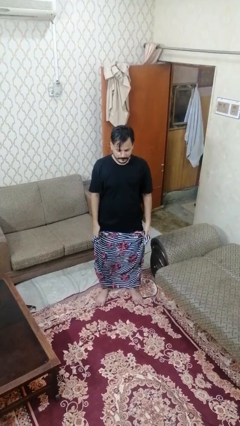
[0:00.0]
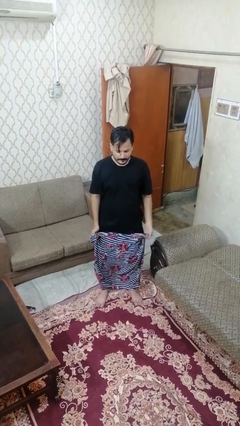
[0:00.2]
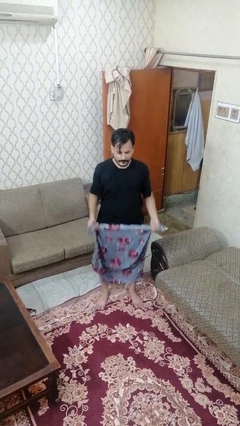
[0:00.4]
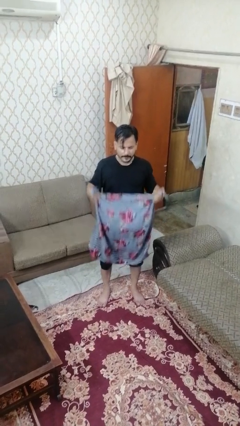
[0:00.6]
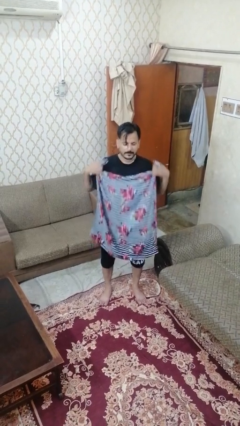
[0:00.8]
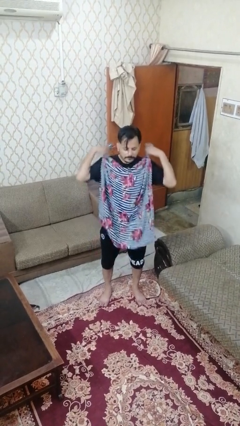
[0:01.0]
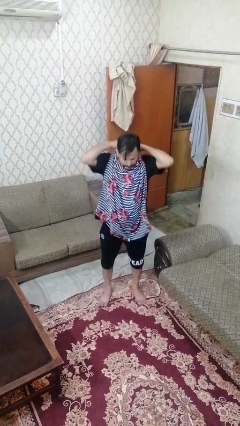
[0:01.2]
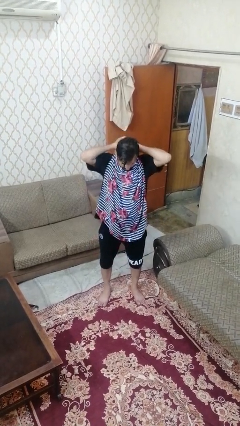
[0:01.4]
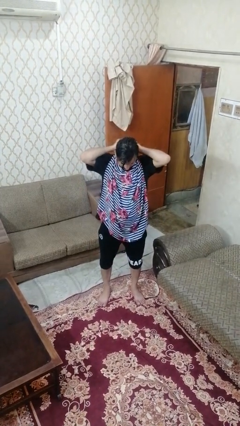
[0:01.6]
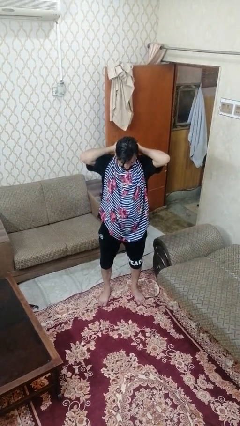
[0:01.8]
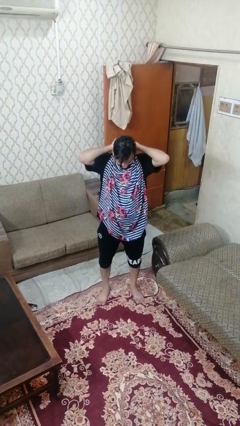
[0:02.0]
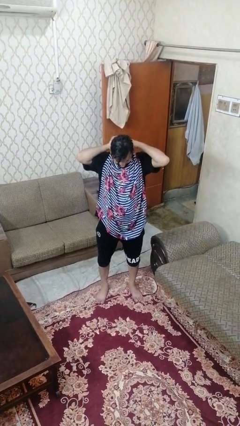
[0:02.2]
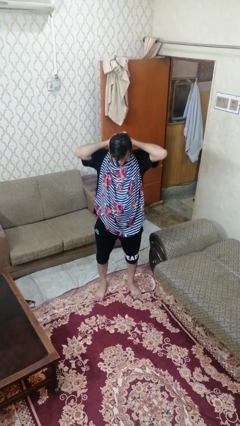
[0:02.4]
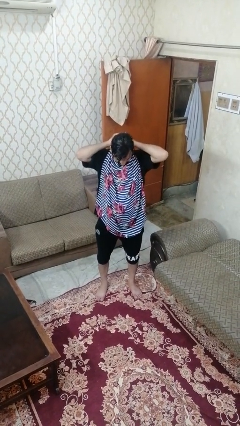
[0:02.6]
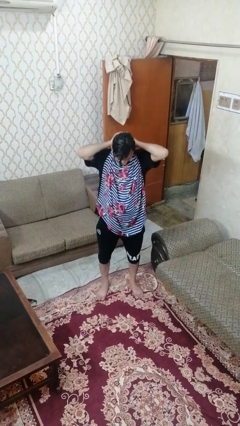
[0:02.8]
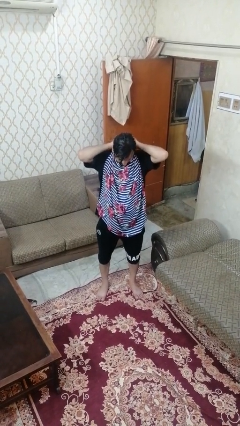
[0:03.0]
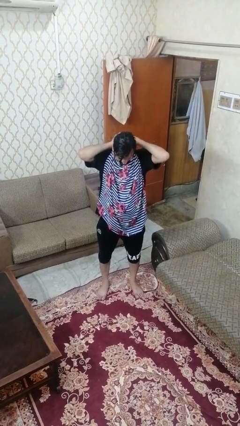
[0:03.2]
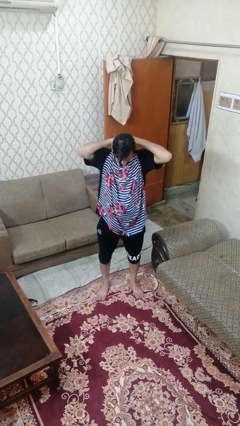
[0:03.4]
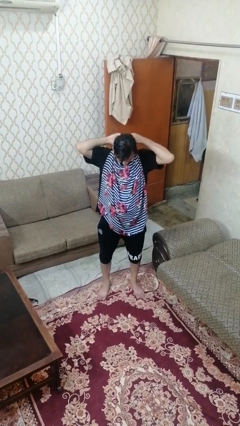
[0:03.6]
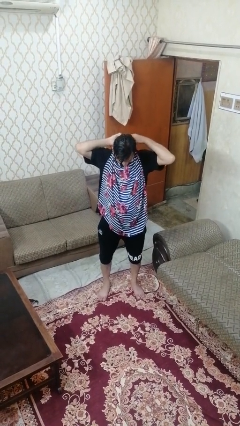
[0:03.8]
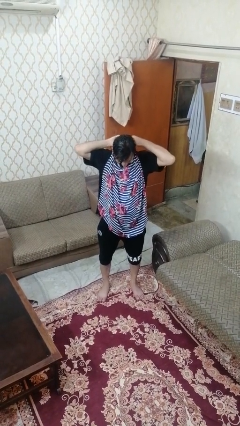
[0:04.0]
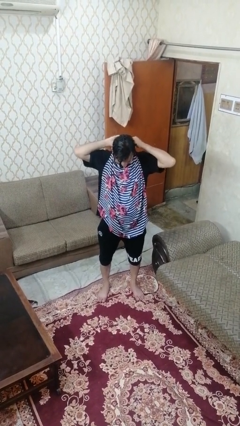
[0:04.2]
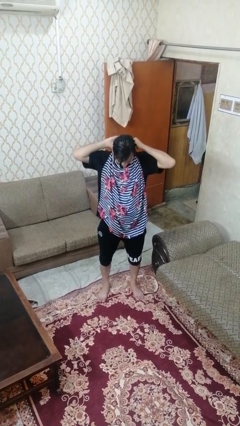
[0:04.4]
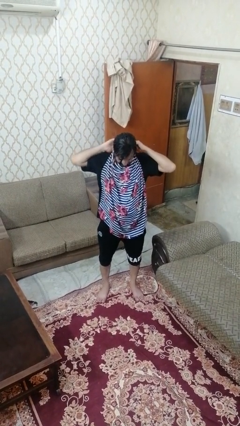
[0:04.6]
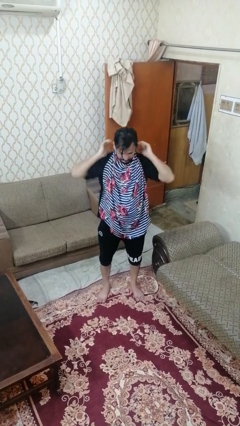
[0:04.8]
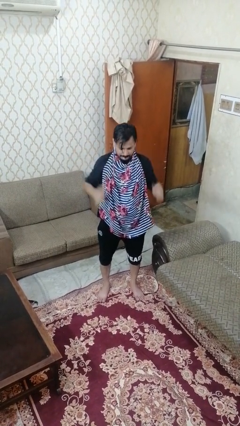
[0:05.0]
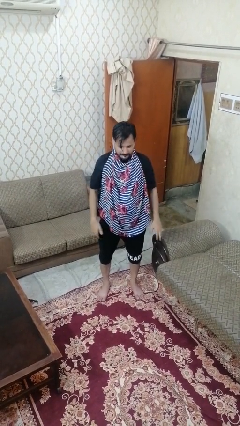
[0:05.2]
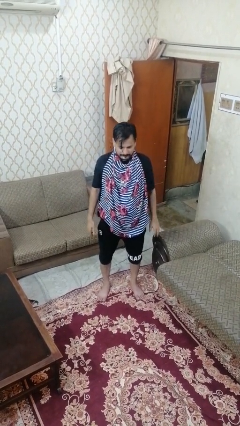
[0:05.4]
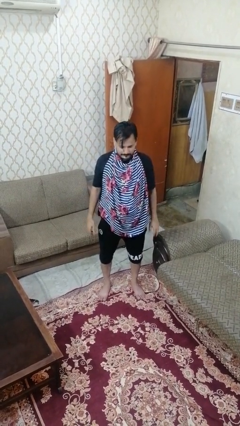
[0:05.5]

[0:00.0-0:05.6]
person puts on apron

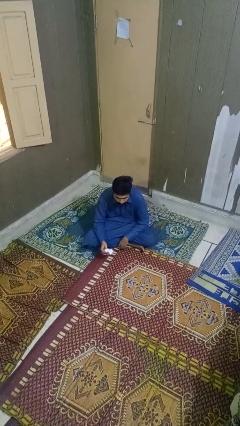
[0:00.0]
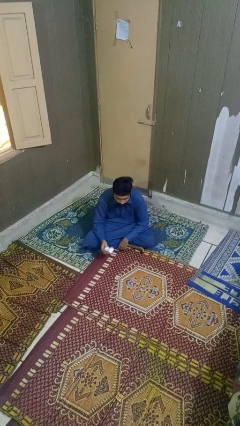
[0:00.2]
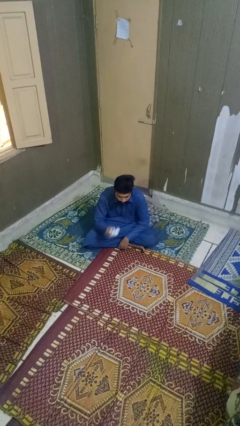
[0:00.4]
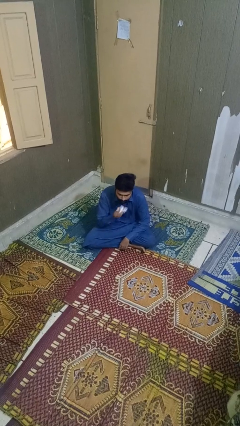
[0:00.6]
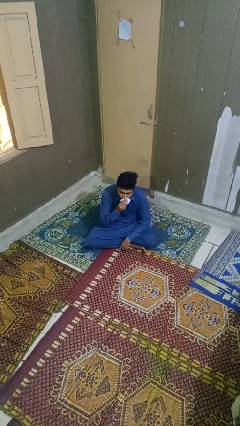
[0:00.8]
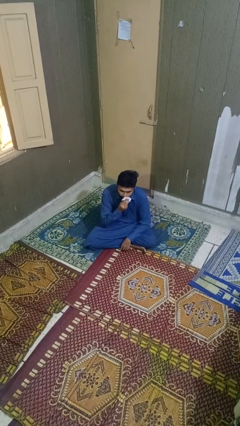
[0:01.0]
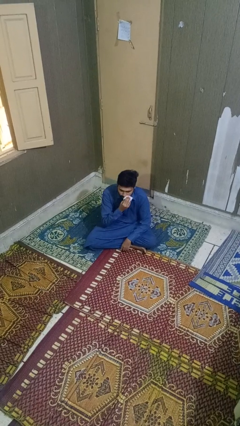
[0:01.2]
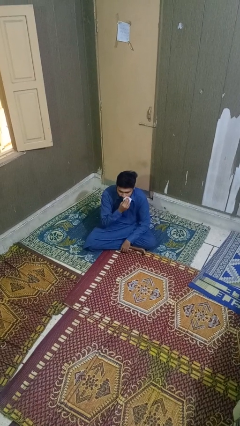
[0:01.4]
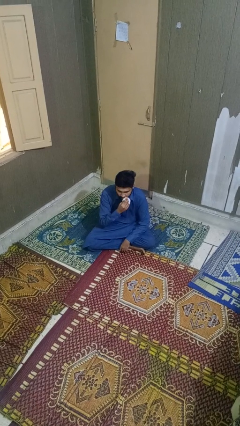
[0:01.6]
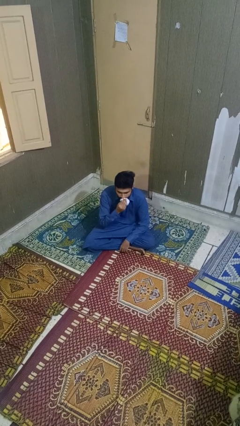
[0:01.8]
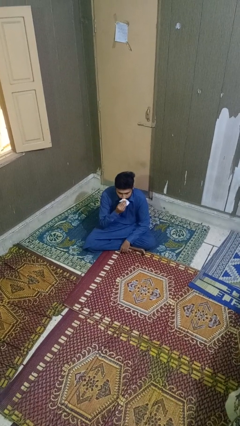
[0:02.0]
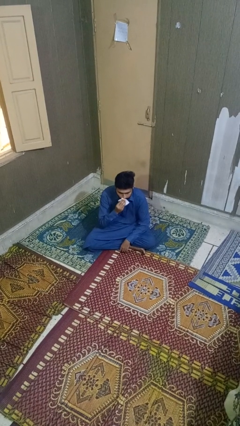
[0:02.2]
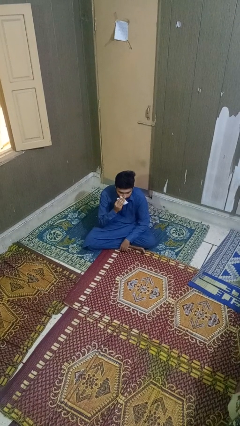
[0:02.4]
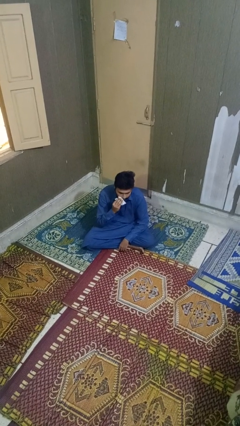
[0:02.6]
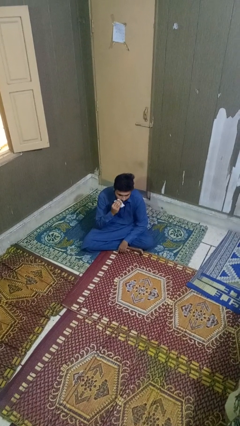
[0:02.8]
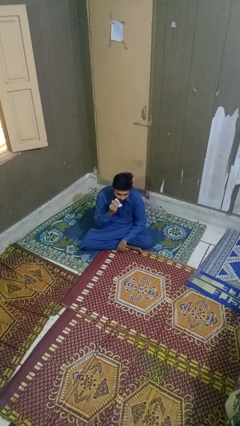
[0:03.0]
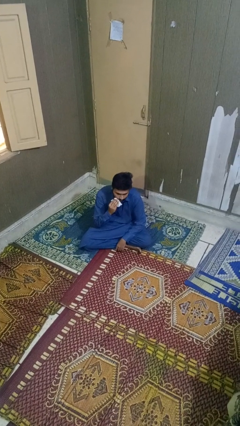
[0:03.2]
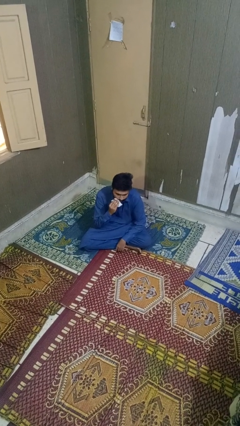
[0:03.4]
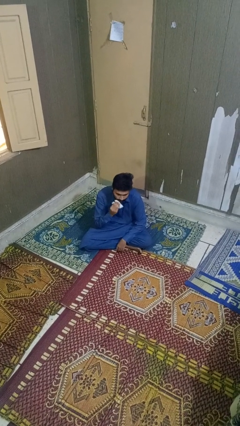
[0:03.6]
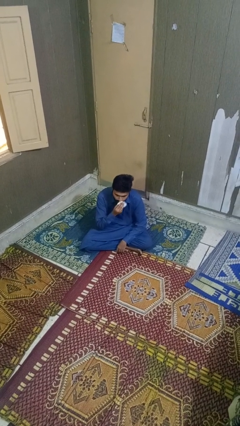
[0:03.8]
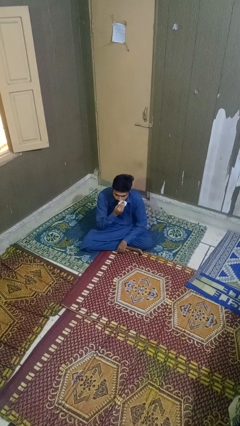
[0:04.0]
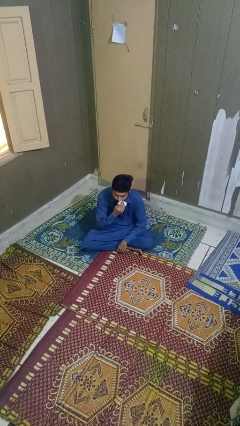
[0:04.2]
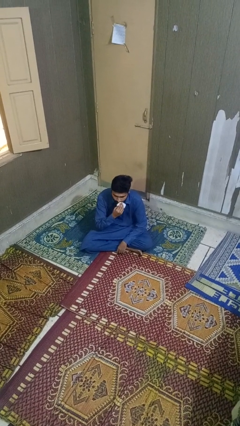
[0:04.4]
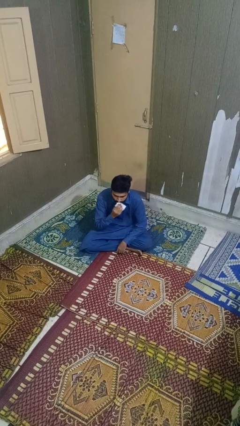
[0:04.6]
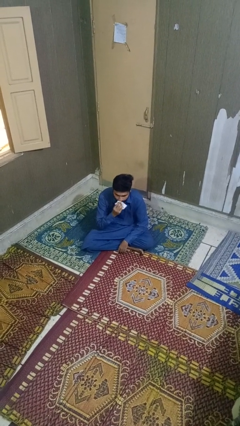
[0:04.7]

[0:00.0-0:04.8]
person wipes mouth with napkin

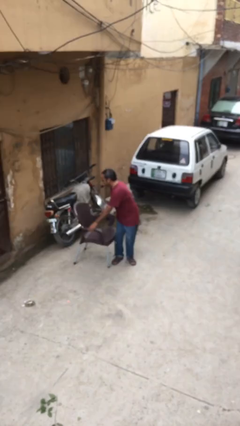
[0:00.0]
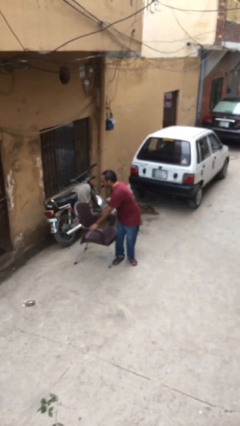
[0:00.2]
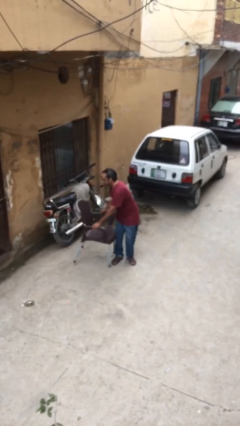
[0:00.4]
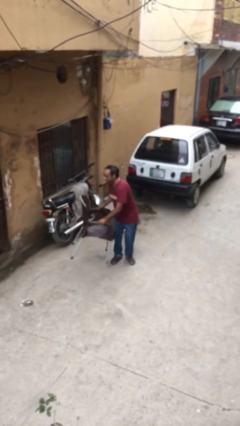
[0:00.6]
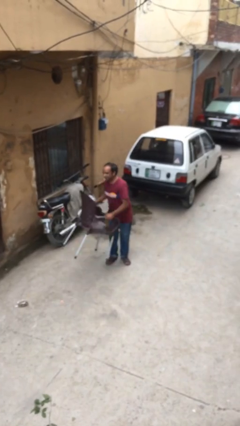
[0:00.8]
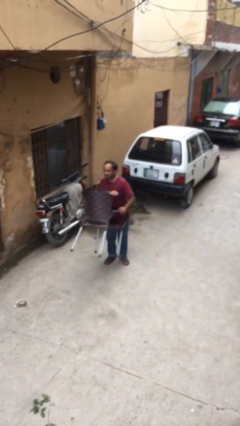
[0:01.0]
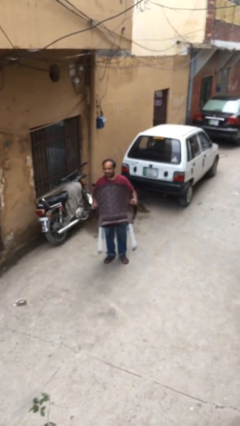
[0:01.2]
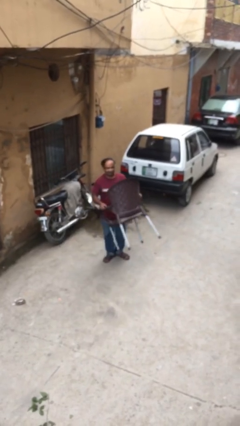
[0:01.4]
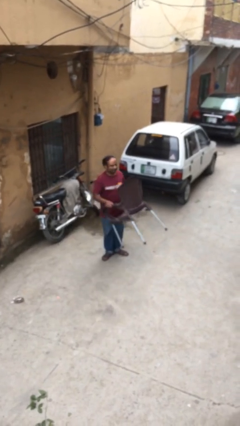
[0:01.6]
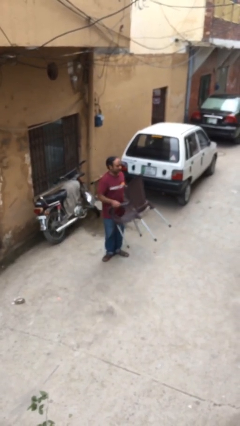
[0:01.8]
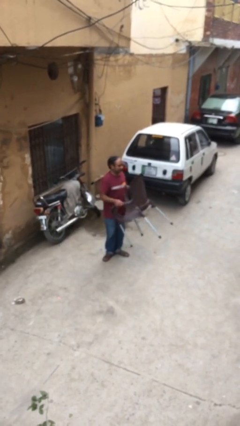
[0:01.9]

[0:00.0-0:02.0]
person picks up object from floor

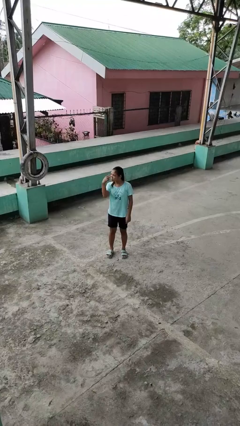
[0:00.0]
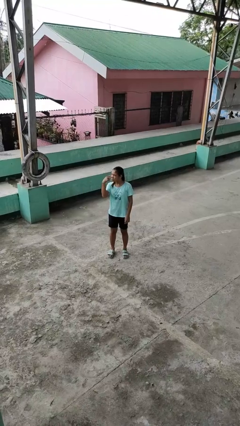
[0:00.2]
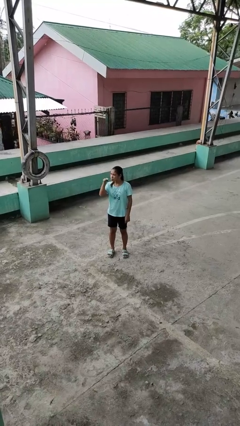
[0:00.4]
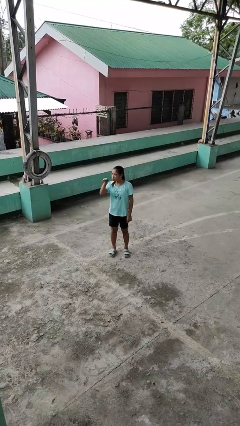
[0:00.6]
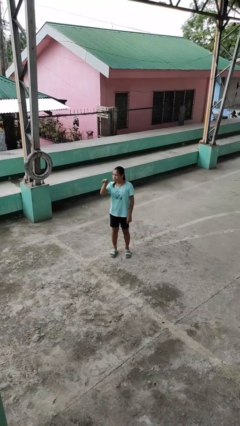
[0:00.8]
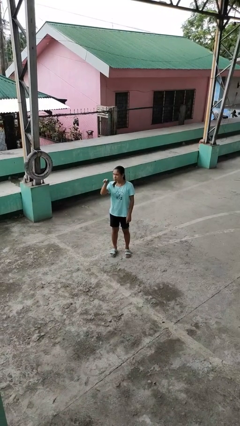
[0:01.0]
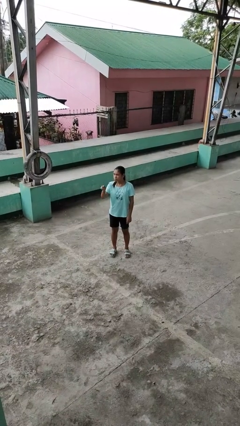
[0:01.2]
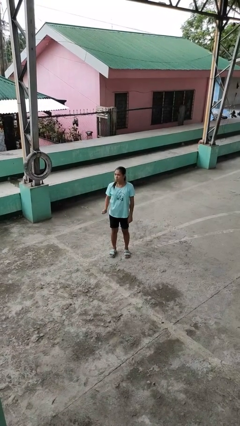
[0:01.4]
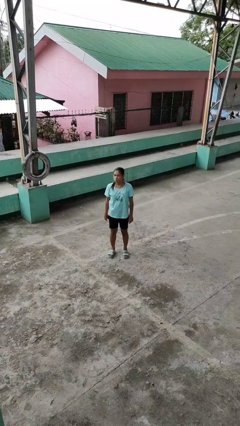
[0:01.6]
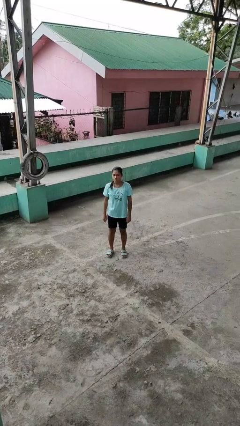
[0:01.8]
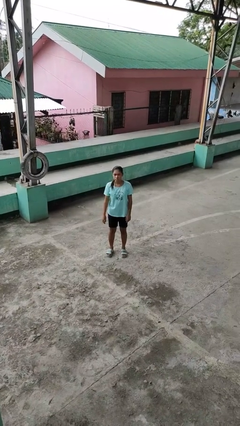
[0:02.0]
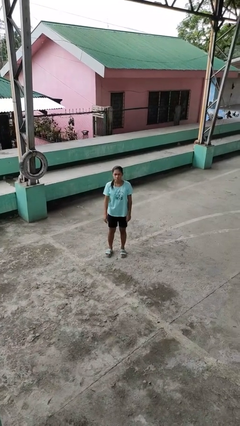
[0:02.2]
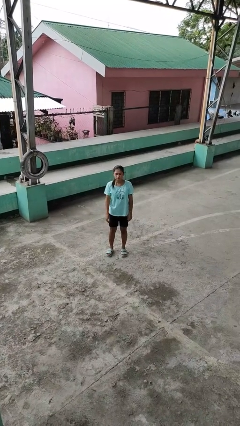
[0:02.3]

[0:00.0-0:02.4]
person gestures watch closely

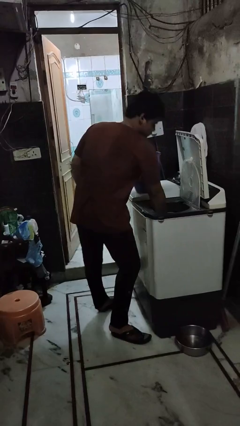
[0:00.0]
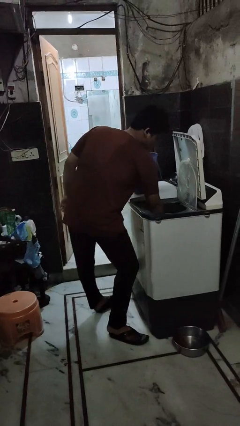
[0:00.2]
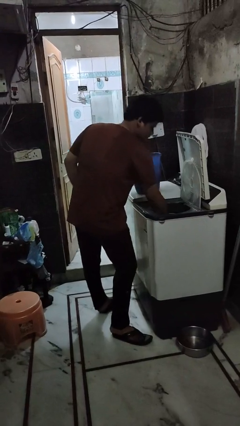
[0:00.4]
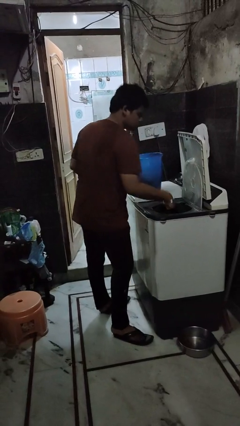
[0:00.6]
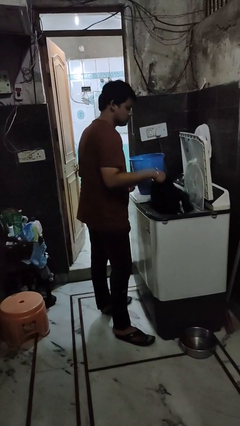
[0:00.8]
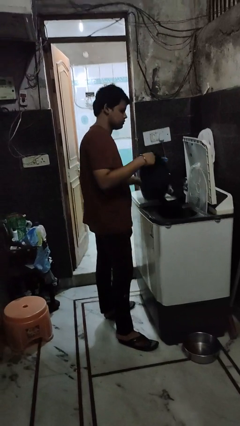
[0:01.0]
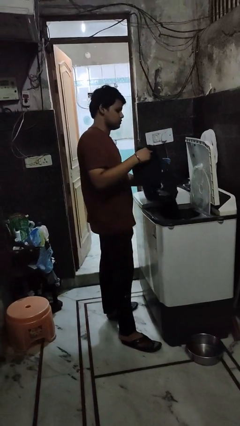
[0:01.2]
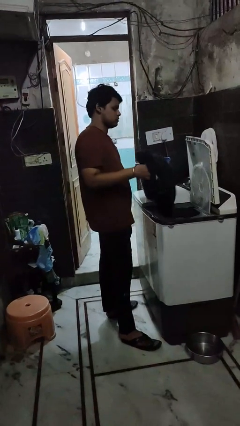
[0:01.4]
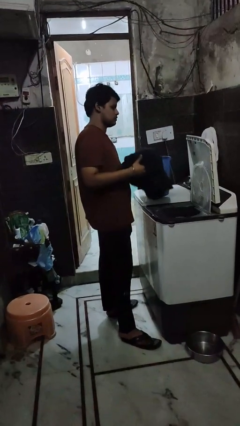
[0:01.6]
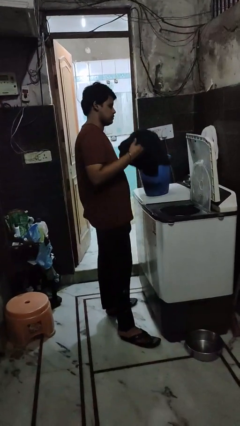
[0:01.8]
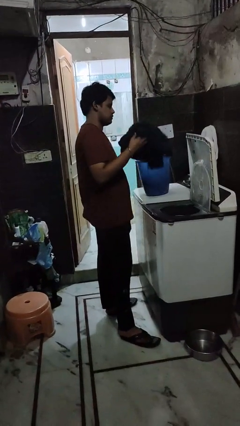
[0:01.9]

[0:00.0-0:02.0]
person unloads dryer

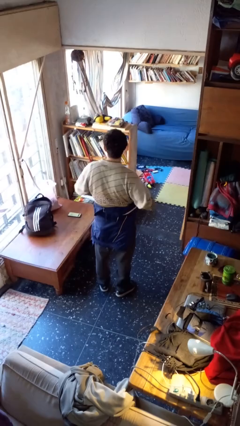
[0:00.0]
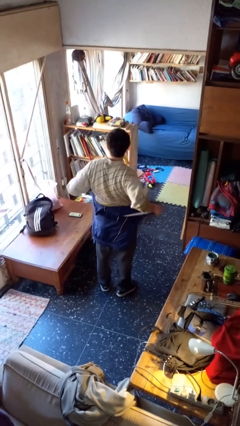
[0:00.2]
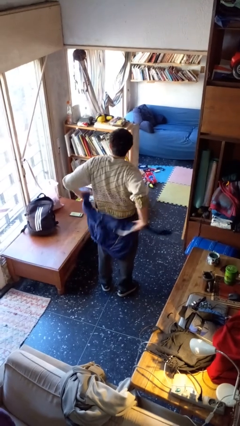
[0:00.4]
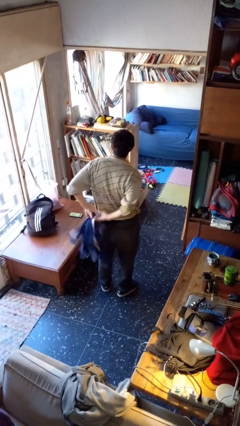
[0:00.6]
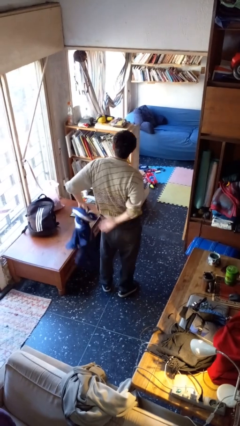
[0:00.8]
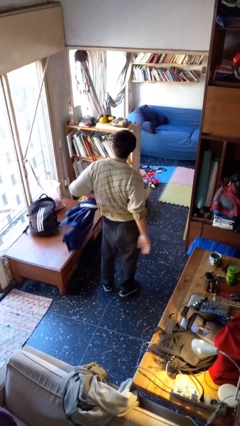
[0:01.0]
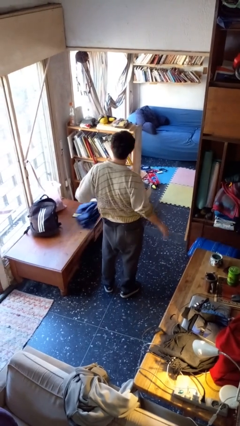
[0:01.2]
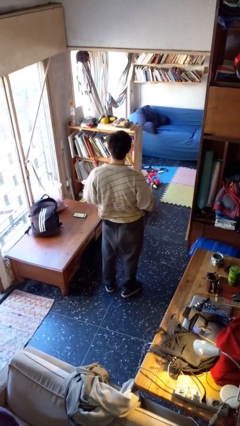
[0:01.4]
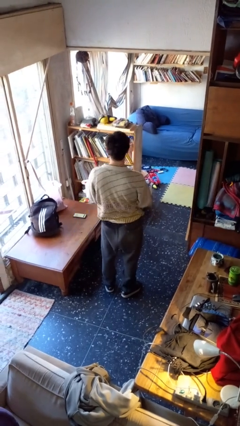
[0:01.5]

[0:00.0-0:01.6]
person unties jacket around waist
